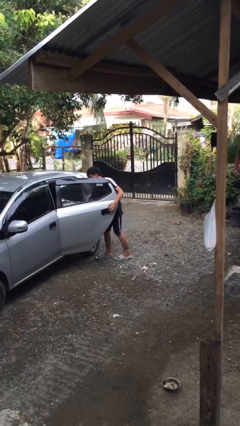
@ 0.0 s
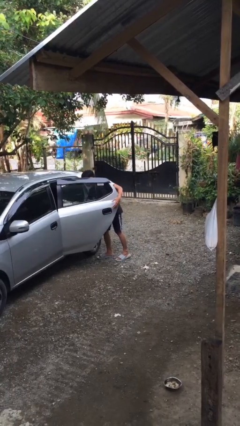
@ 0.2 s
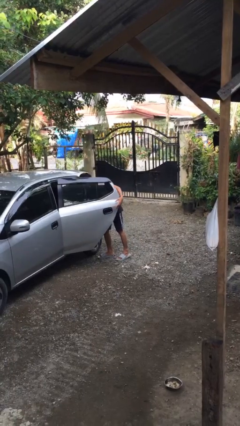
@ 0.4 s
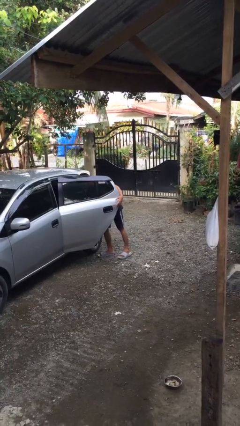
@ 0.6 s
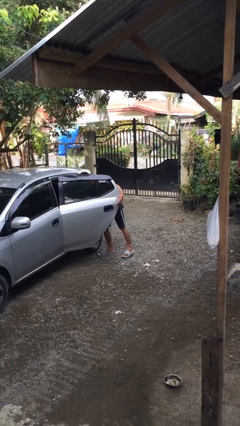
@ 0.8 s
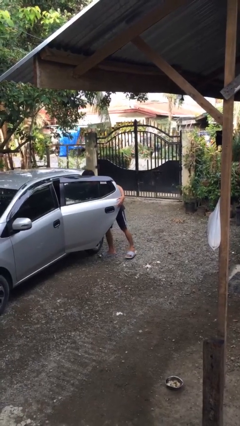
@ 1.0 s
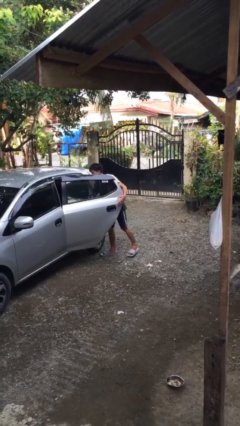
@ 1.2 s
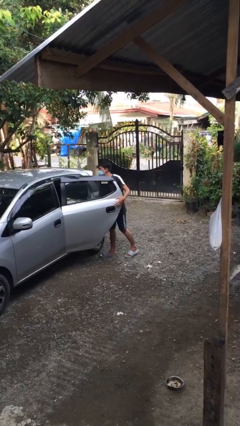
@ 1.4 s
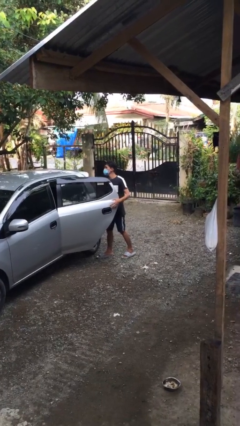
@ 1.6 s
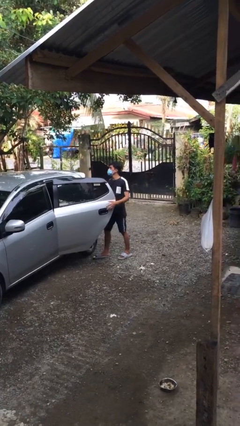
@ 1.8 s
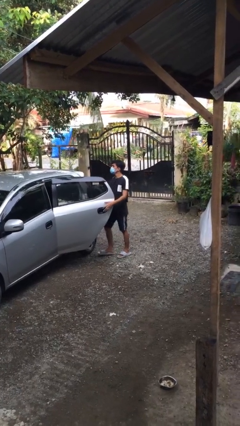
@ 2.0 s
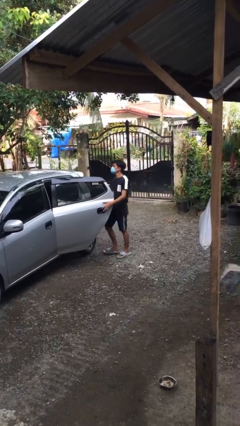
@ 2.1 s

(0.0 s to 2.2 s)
person unloads car

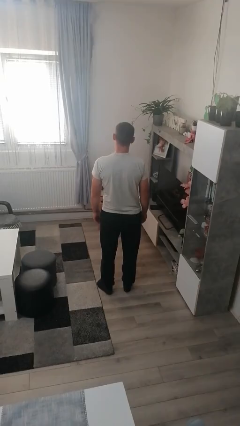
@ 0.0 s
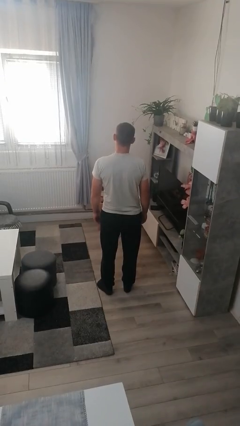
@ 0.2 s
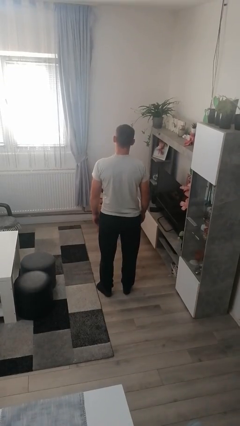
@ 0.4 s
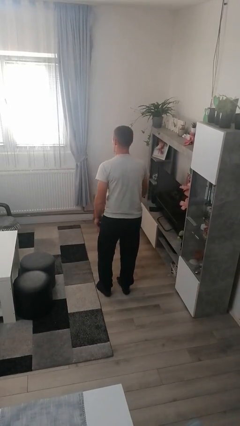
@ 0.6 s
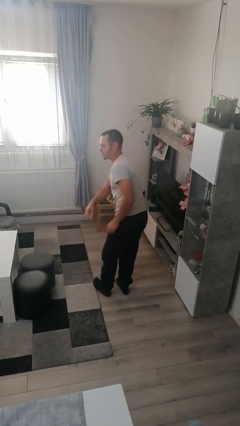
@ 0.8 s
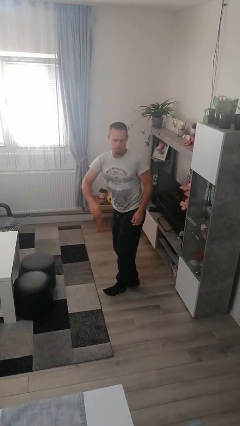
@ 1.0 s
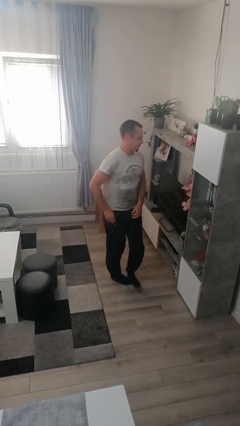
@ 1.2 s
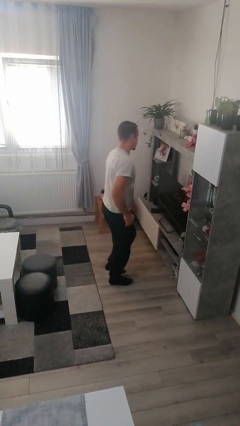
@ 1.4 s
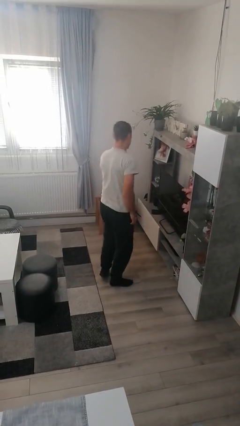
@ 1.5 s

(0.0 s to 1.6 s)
person twirls

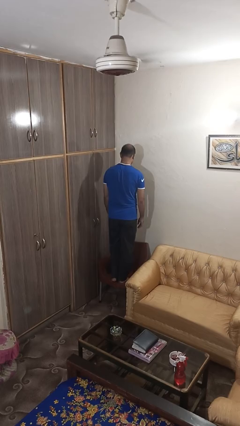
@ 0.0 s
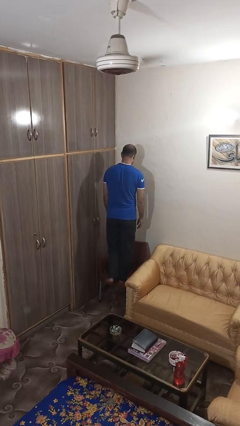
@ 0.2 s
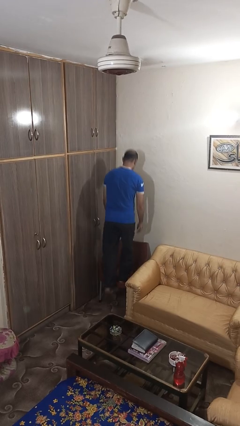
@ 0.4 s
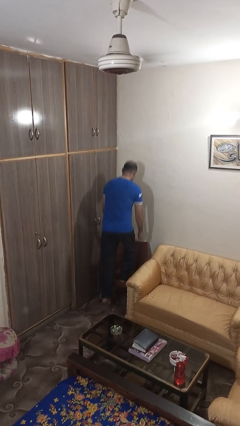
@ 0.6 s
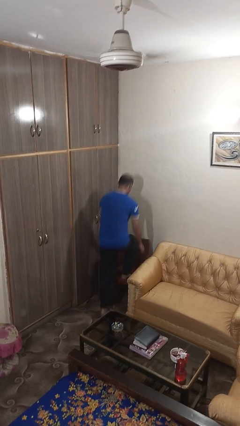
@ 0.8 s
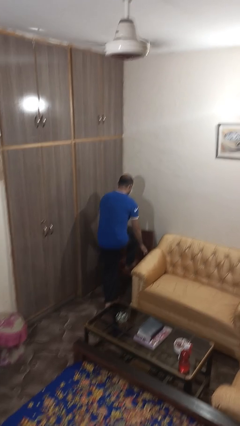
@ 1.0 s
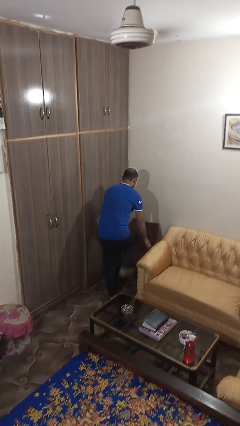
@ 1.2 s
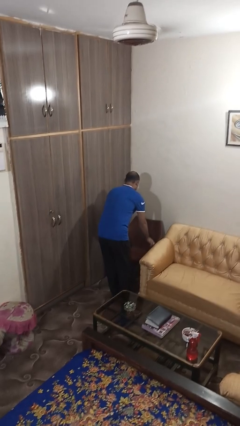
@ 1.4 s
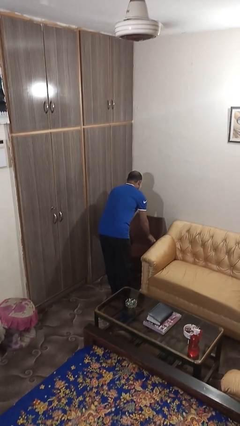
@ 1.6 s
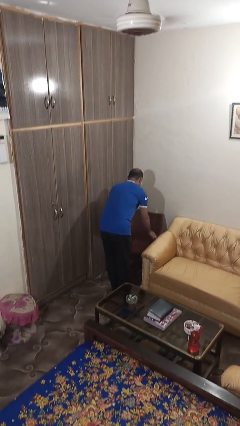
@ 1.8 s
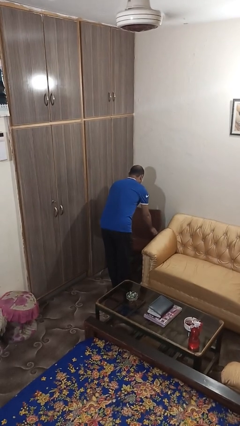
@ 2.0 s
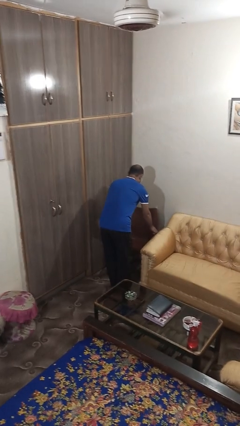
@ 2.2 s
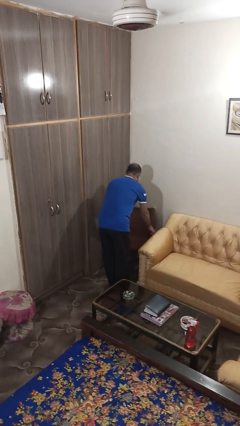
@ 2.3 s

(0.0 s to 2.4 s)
person climbs off chair

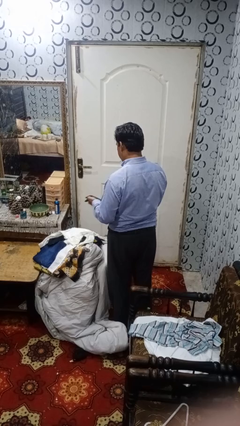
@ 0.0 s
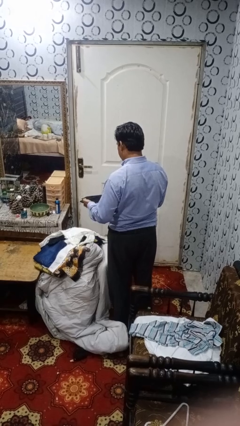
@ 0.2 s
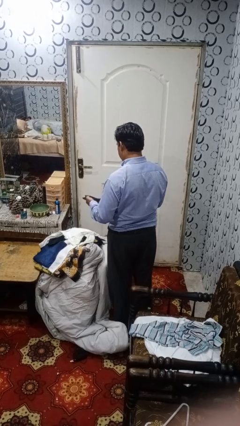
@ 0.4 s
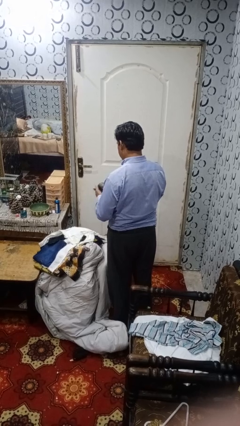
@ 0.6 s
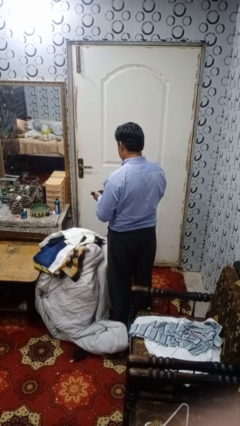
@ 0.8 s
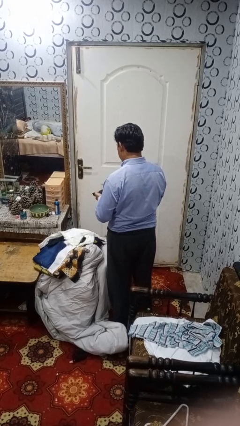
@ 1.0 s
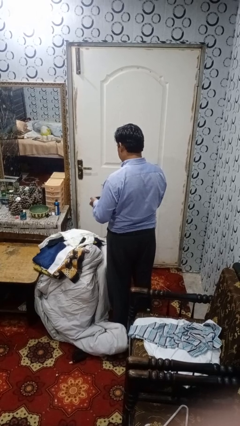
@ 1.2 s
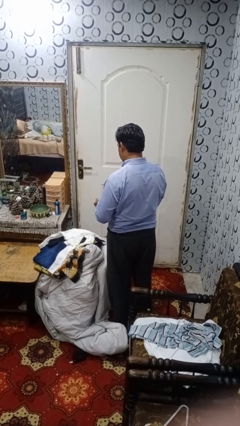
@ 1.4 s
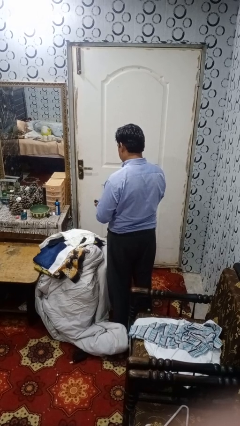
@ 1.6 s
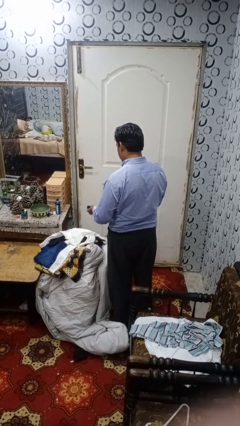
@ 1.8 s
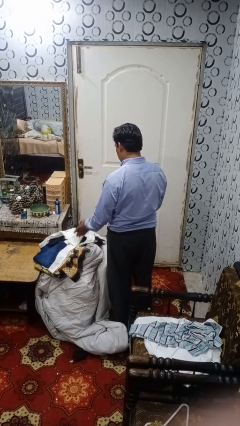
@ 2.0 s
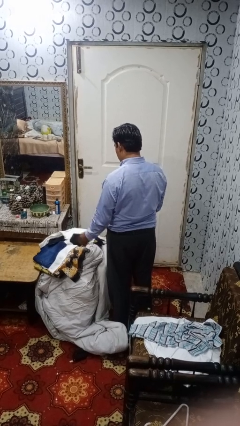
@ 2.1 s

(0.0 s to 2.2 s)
person folds socks

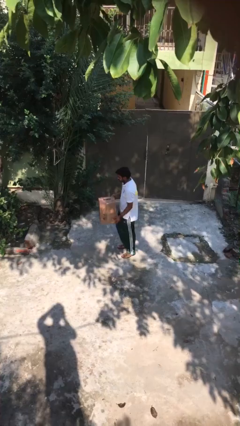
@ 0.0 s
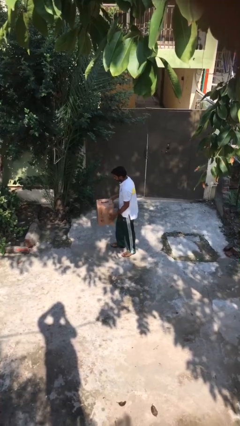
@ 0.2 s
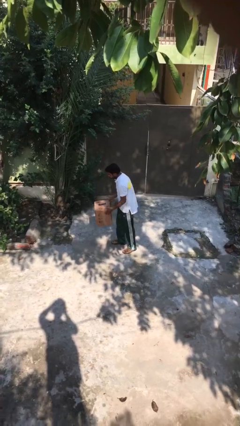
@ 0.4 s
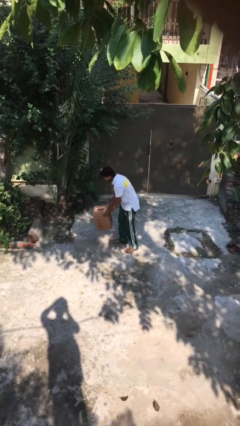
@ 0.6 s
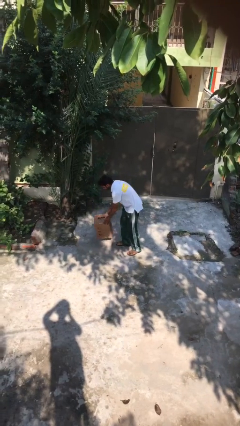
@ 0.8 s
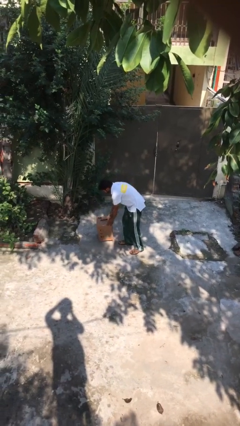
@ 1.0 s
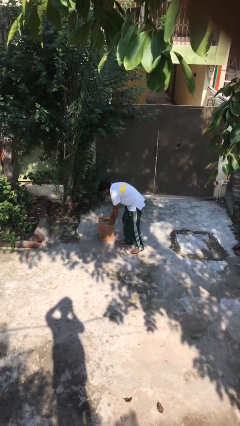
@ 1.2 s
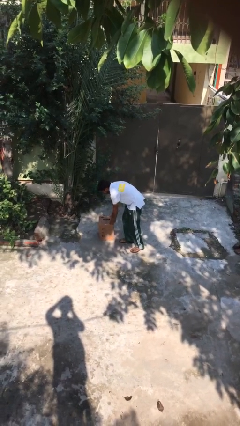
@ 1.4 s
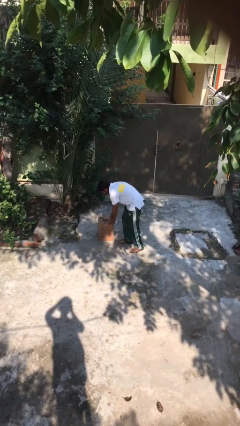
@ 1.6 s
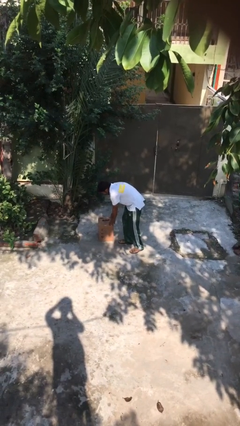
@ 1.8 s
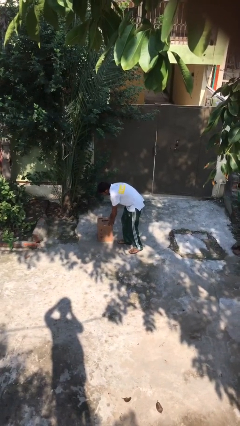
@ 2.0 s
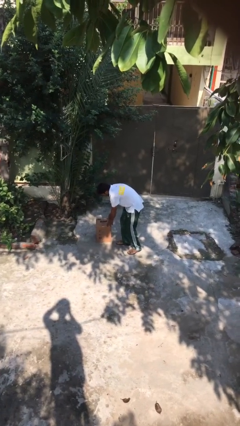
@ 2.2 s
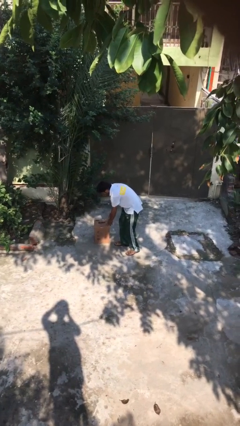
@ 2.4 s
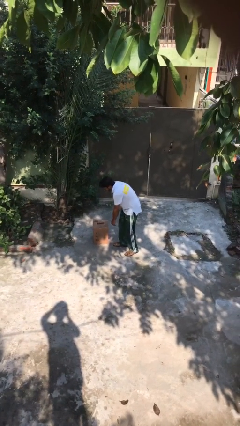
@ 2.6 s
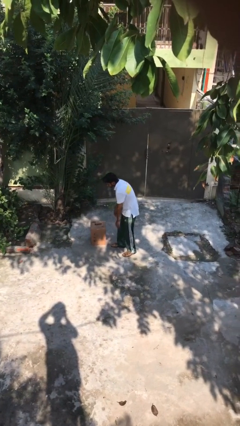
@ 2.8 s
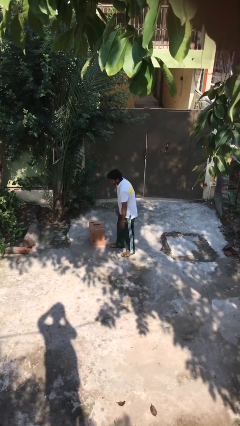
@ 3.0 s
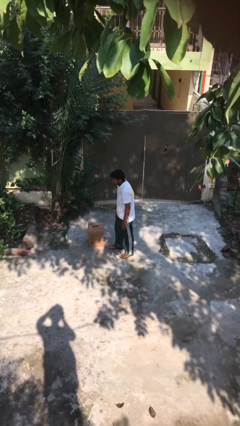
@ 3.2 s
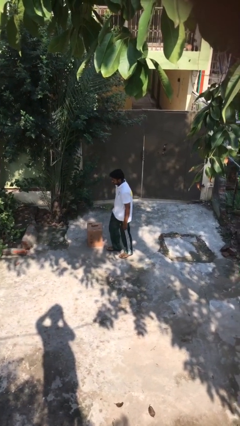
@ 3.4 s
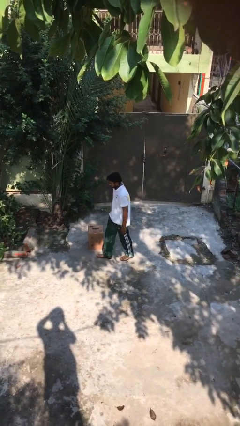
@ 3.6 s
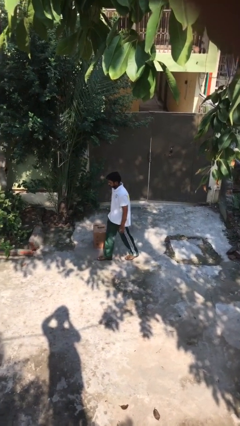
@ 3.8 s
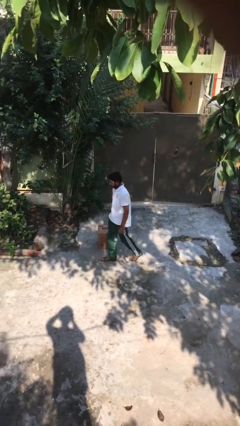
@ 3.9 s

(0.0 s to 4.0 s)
person puts down object on floor

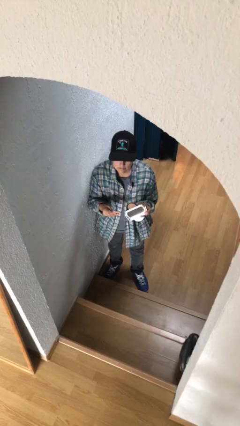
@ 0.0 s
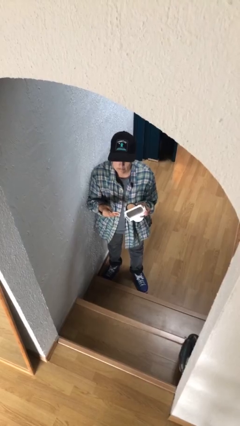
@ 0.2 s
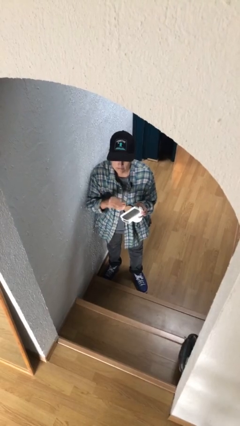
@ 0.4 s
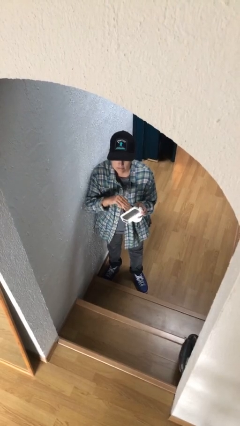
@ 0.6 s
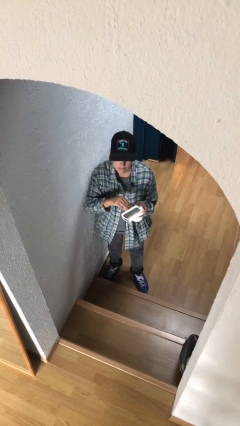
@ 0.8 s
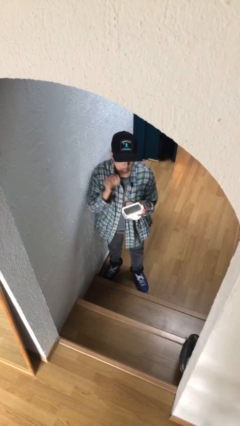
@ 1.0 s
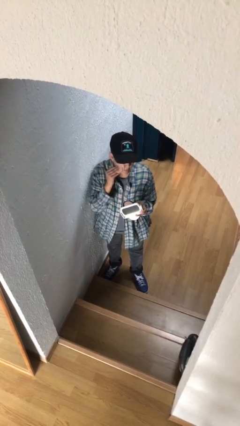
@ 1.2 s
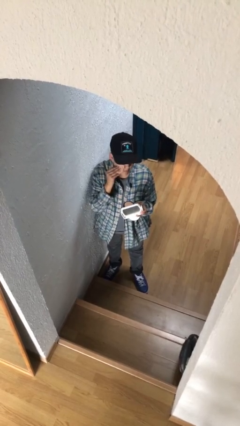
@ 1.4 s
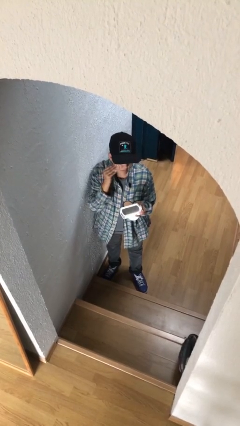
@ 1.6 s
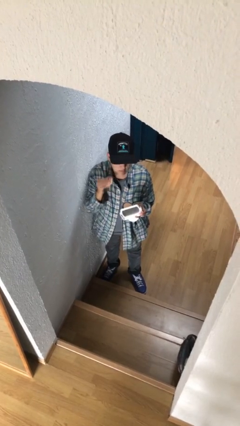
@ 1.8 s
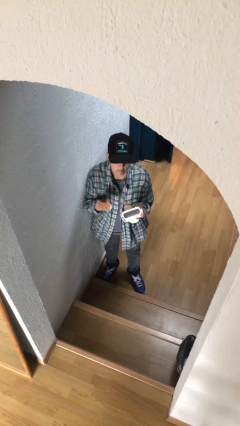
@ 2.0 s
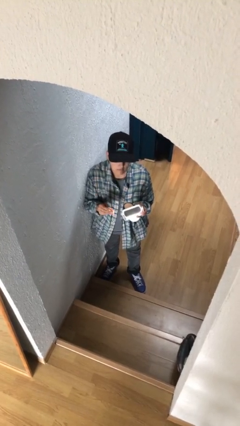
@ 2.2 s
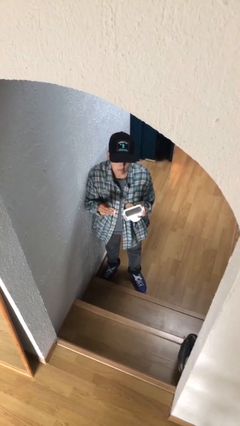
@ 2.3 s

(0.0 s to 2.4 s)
person applies foundation makeup

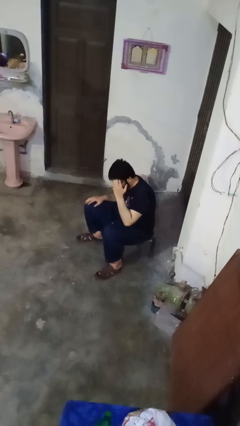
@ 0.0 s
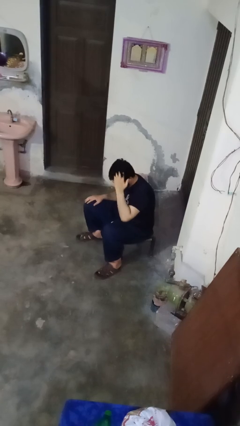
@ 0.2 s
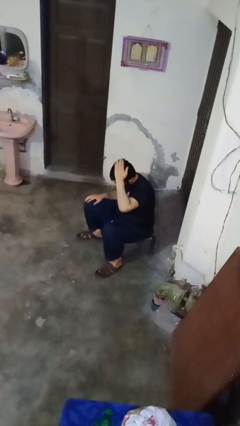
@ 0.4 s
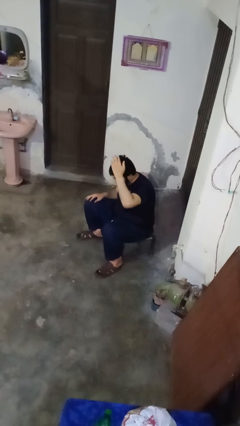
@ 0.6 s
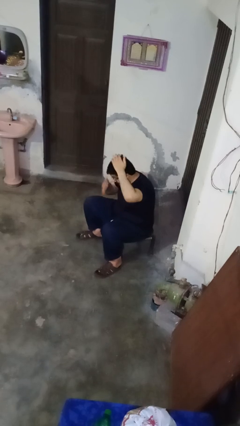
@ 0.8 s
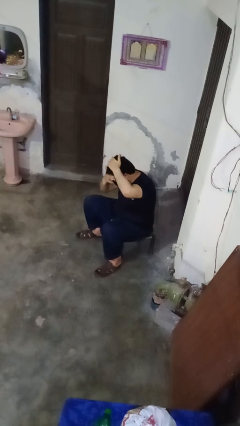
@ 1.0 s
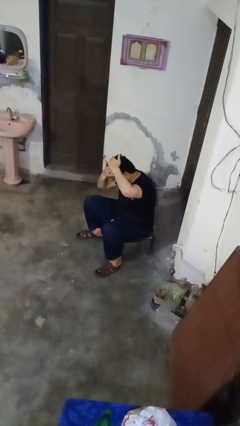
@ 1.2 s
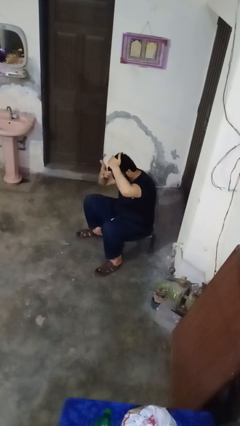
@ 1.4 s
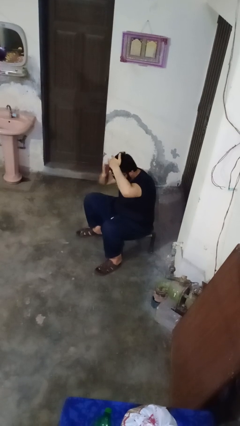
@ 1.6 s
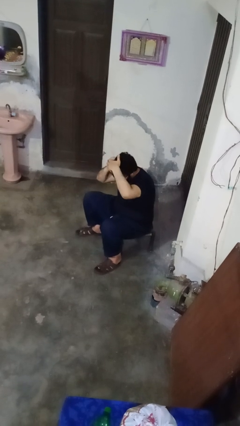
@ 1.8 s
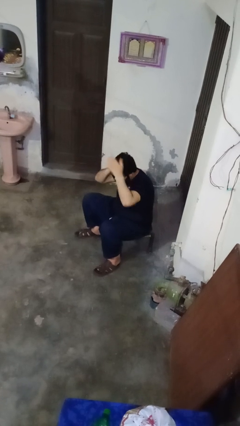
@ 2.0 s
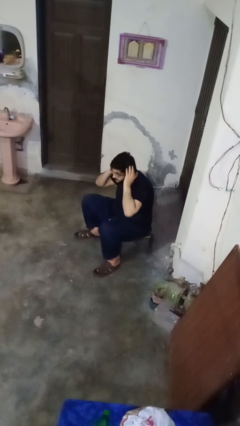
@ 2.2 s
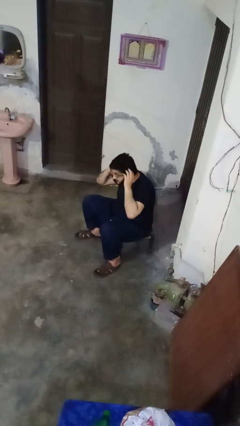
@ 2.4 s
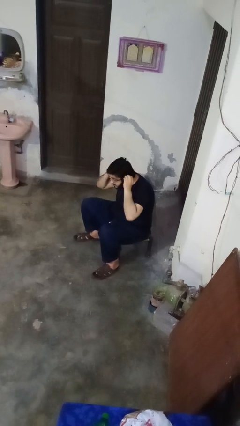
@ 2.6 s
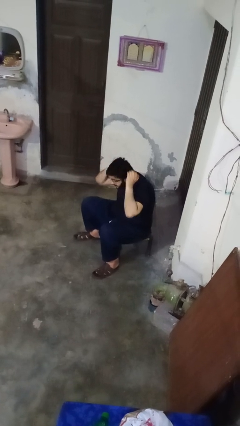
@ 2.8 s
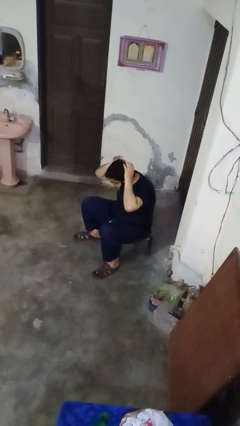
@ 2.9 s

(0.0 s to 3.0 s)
person strokes hair
